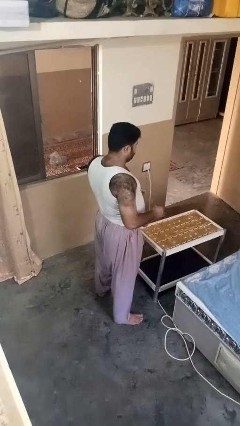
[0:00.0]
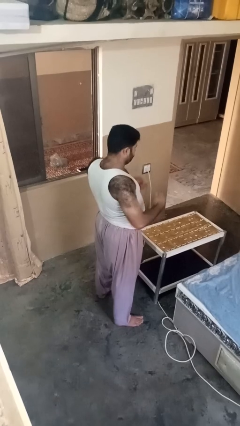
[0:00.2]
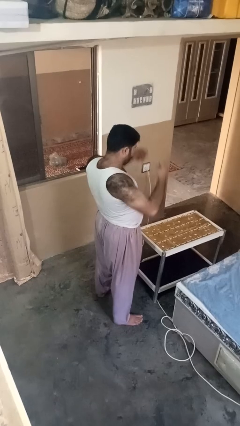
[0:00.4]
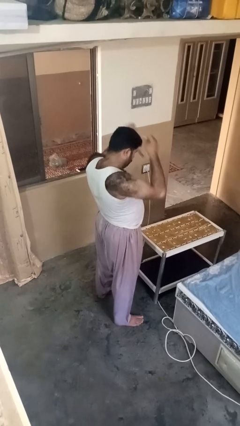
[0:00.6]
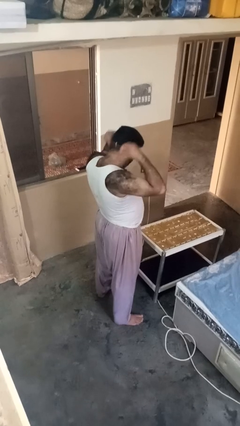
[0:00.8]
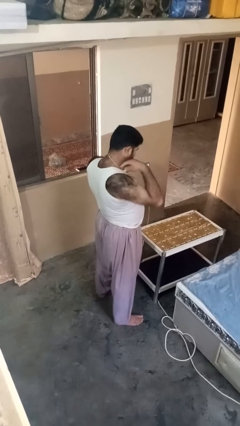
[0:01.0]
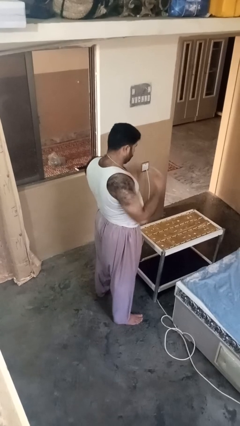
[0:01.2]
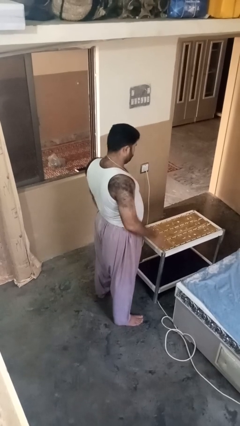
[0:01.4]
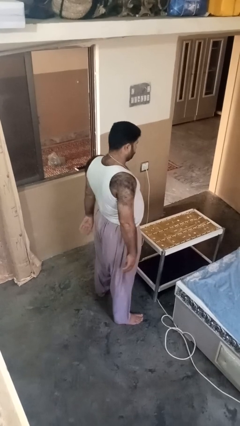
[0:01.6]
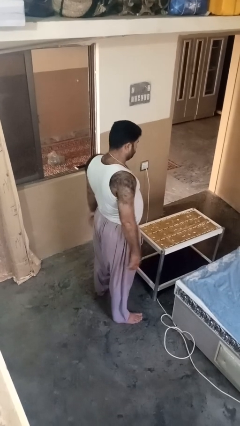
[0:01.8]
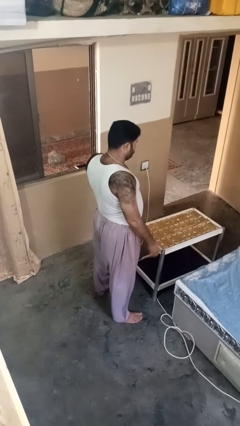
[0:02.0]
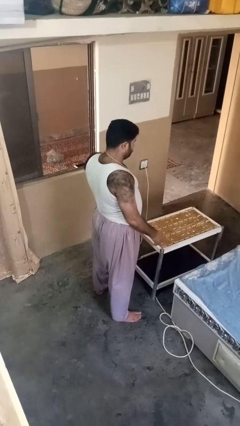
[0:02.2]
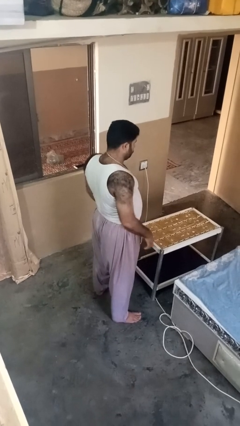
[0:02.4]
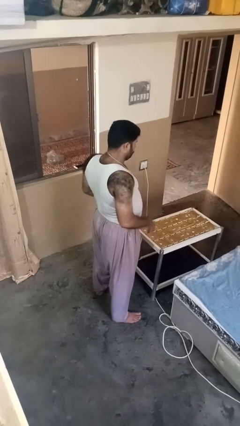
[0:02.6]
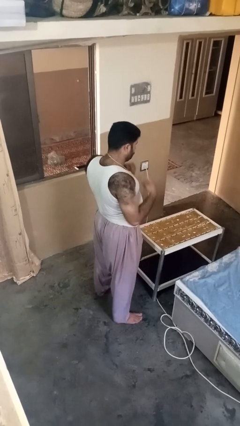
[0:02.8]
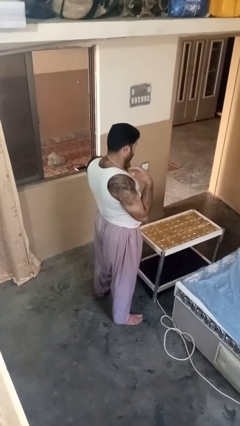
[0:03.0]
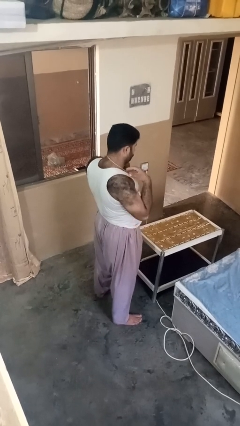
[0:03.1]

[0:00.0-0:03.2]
person puts on necklace

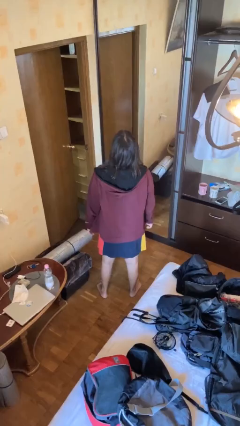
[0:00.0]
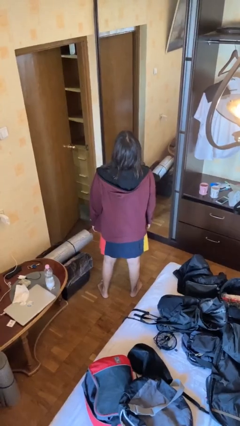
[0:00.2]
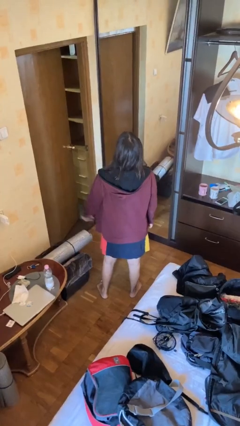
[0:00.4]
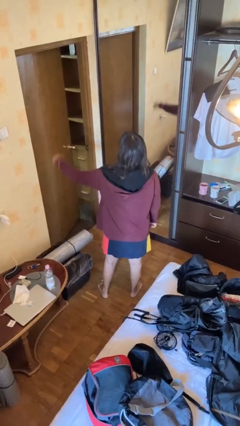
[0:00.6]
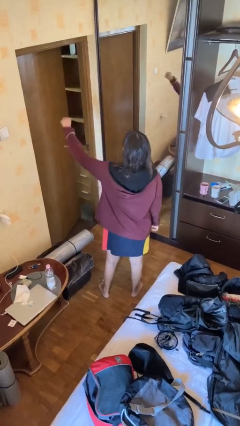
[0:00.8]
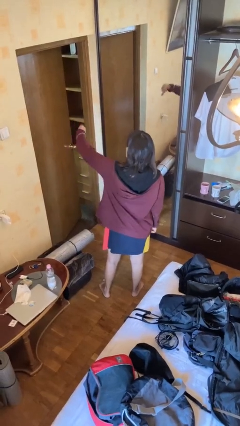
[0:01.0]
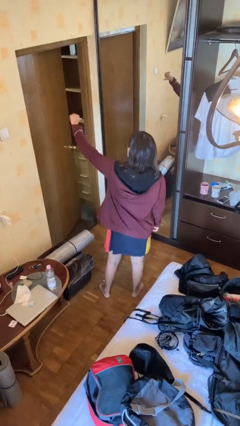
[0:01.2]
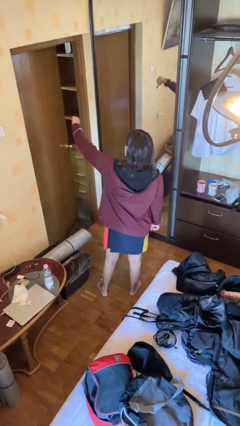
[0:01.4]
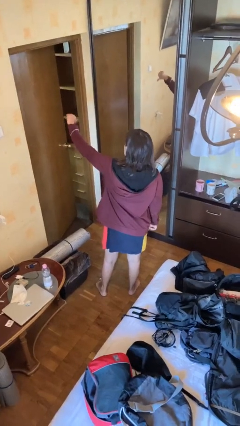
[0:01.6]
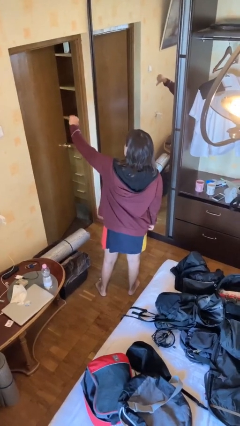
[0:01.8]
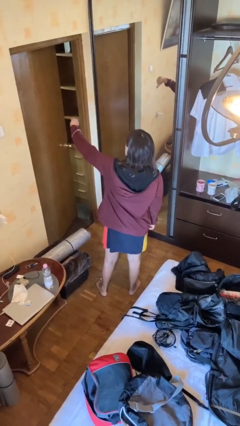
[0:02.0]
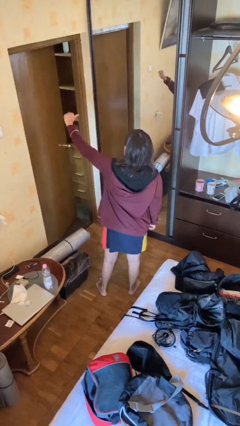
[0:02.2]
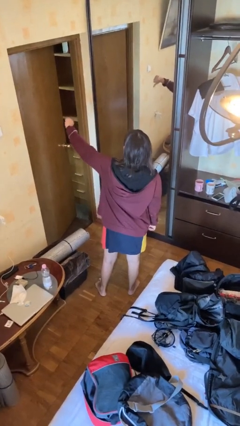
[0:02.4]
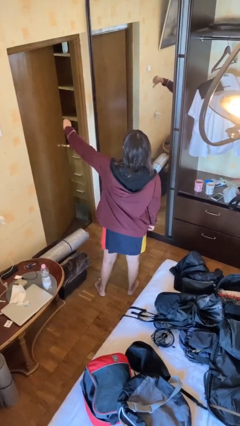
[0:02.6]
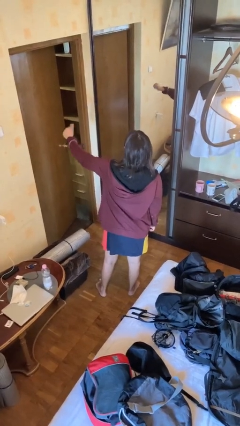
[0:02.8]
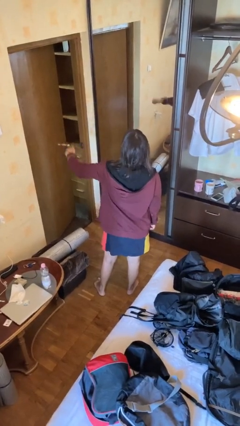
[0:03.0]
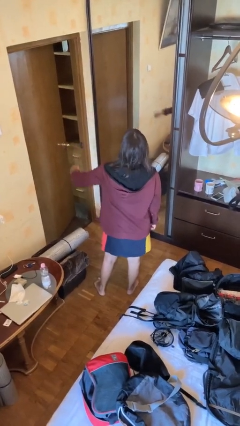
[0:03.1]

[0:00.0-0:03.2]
person gestures thumbs down

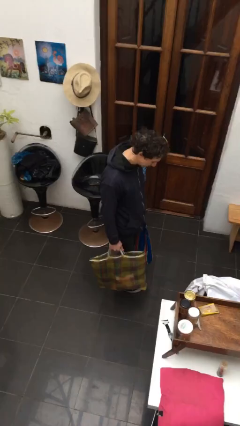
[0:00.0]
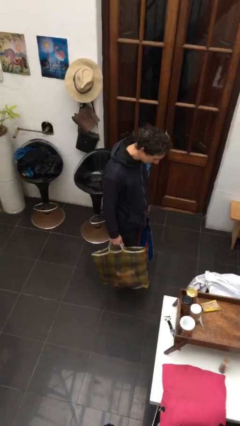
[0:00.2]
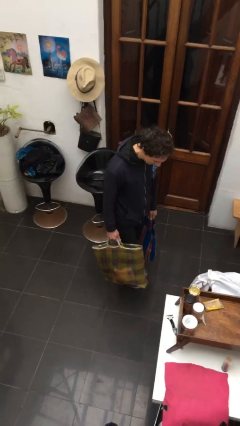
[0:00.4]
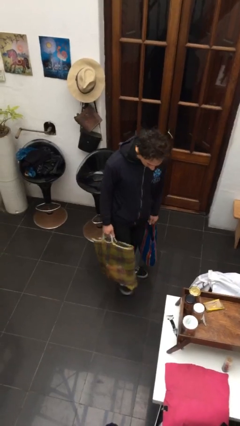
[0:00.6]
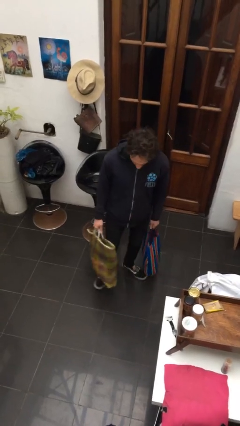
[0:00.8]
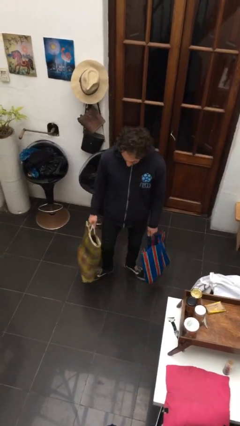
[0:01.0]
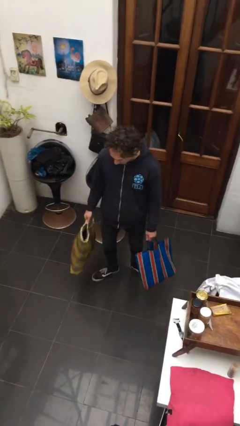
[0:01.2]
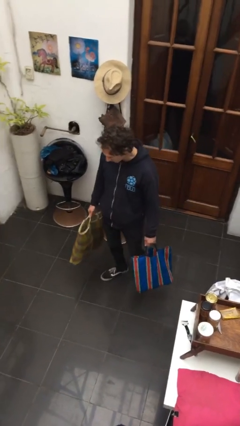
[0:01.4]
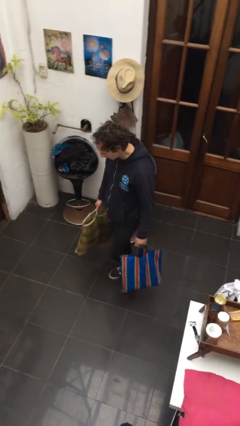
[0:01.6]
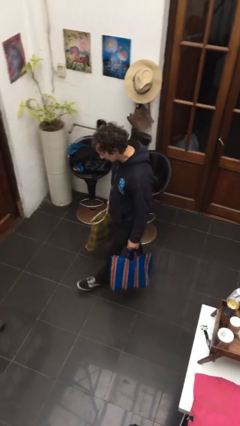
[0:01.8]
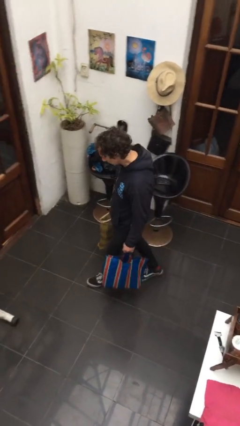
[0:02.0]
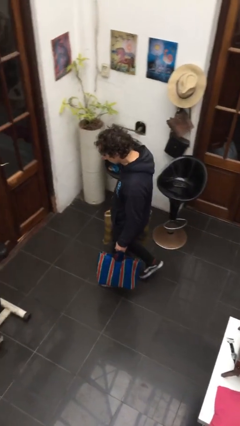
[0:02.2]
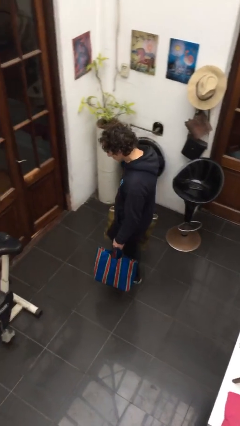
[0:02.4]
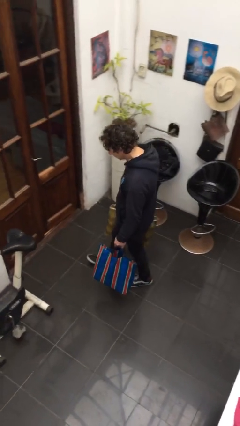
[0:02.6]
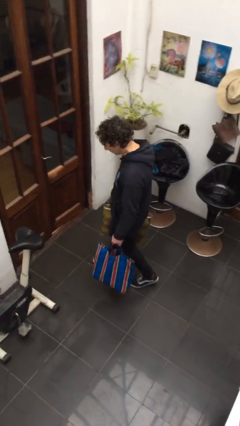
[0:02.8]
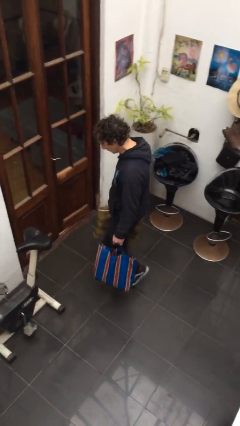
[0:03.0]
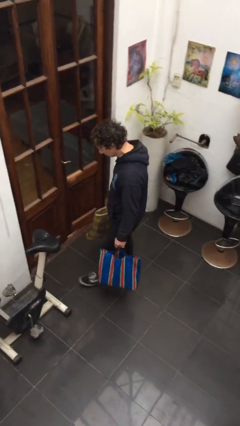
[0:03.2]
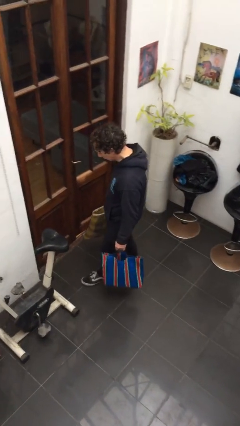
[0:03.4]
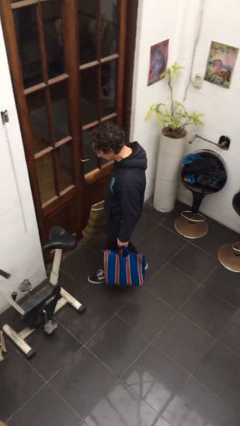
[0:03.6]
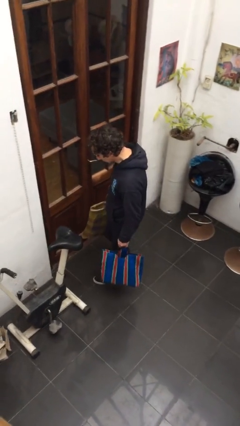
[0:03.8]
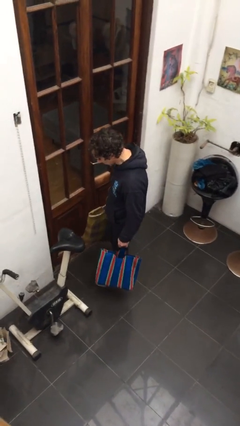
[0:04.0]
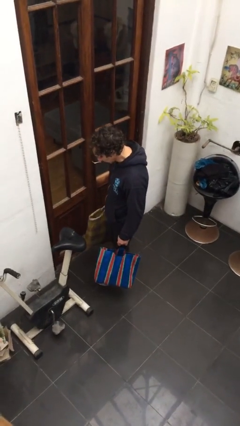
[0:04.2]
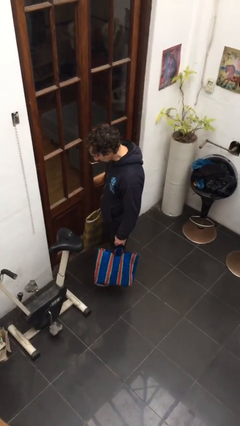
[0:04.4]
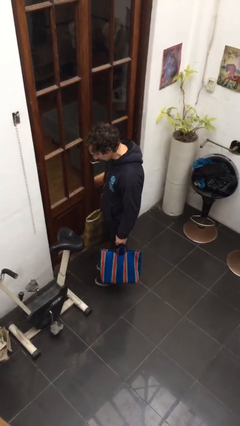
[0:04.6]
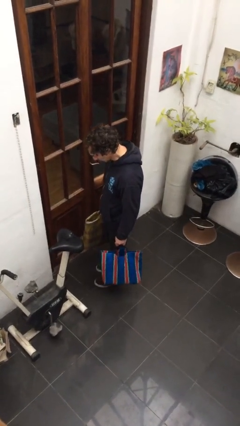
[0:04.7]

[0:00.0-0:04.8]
person carries groceries

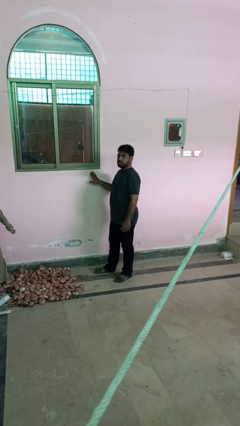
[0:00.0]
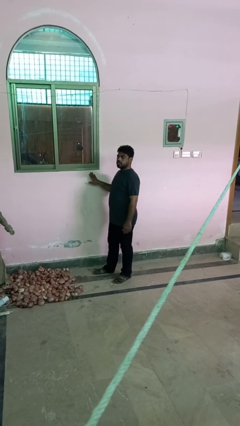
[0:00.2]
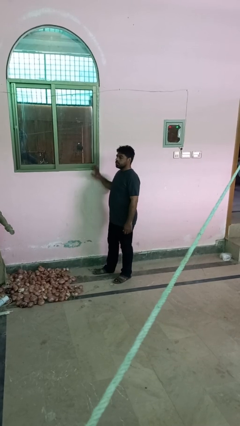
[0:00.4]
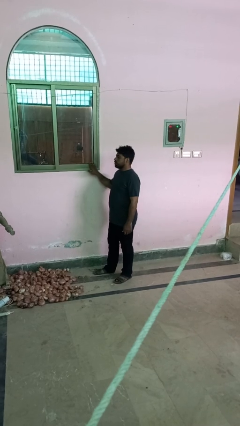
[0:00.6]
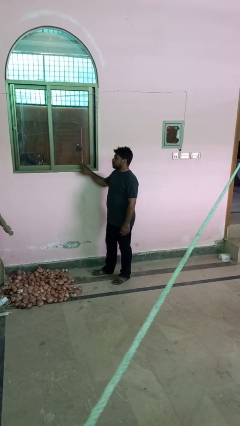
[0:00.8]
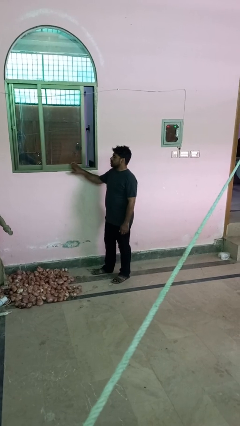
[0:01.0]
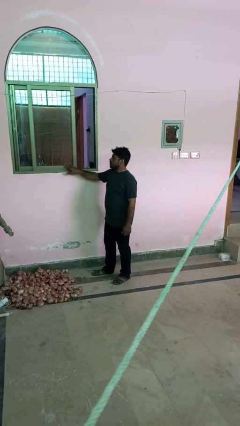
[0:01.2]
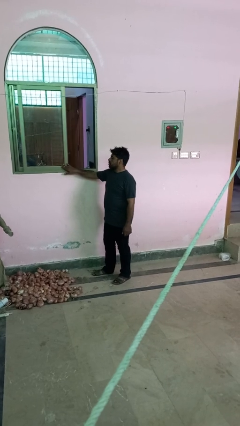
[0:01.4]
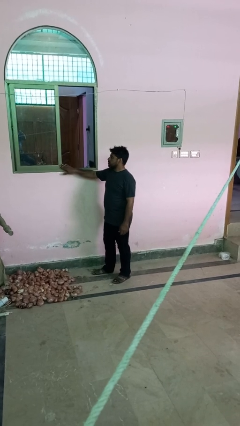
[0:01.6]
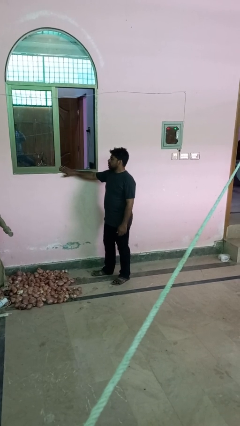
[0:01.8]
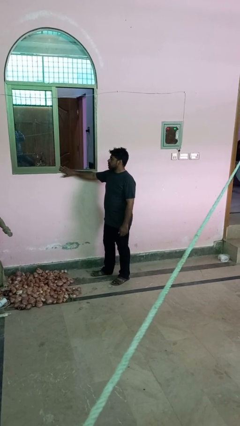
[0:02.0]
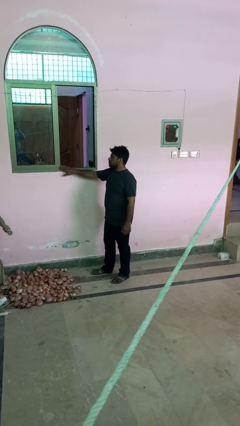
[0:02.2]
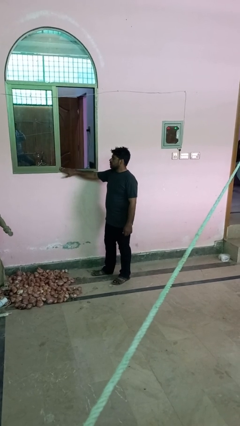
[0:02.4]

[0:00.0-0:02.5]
person opens sliding door

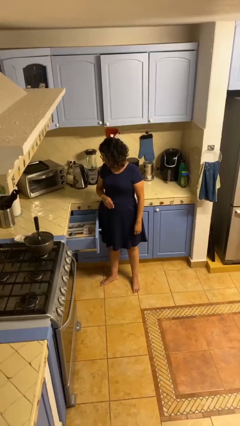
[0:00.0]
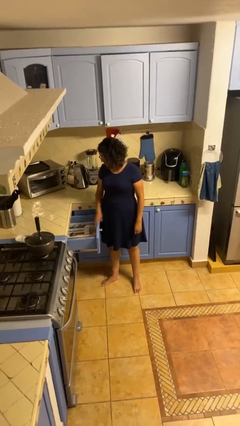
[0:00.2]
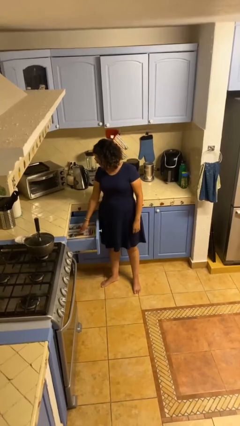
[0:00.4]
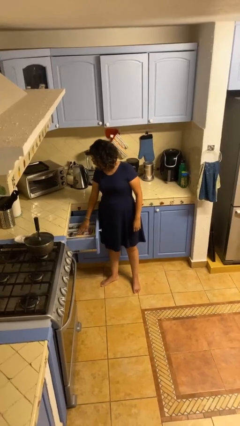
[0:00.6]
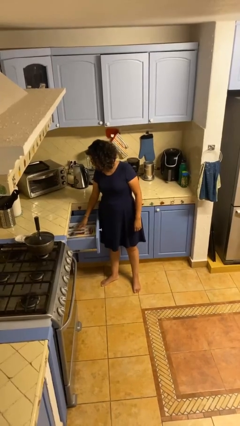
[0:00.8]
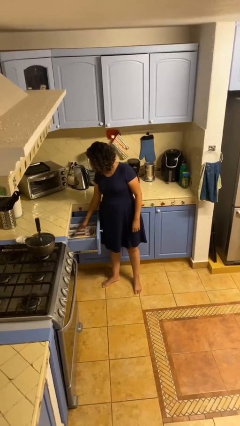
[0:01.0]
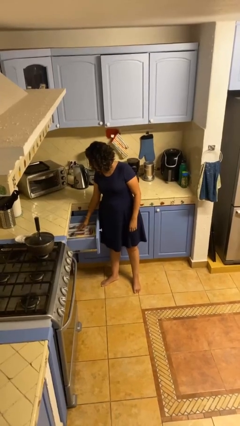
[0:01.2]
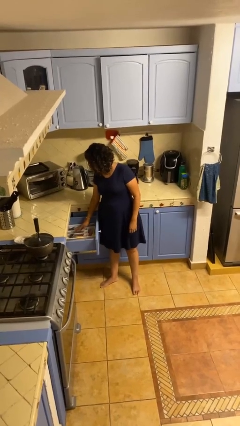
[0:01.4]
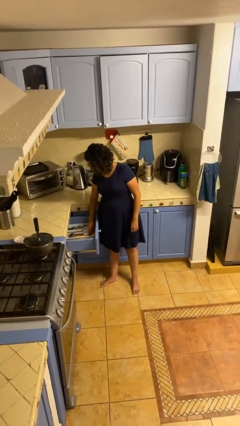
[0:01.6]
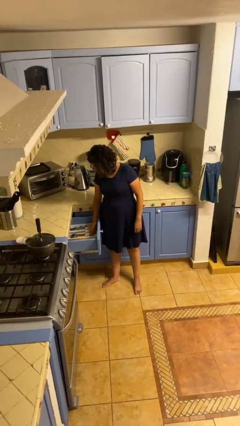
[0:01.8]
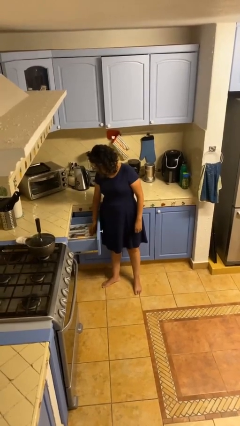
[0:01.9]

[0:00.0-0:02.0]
person searches in kitchen drawer

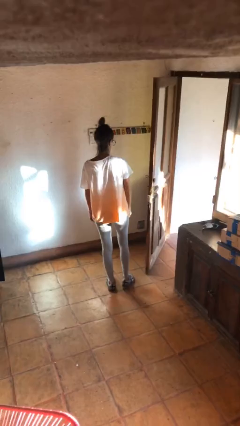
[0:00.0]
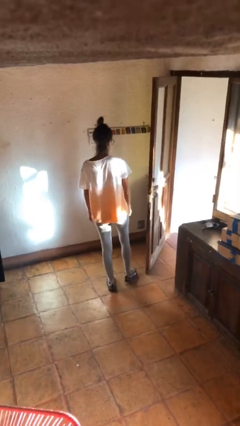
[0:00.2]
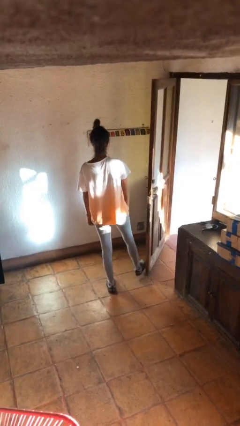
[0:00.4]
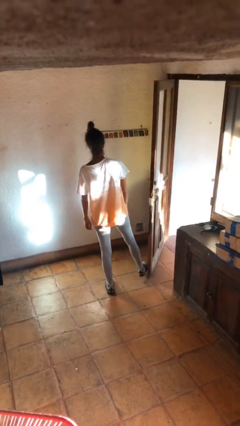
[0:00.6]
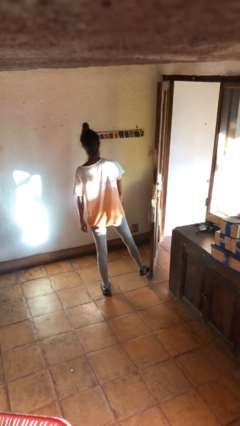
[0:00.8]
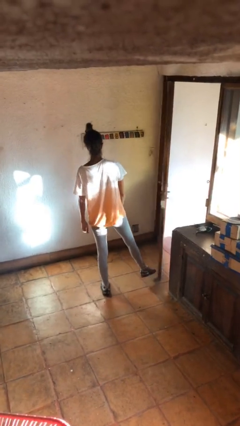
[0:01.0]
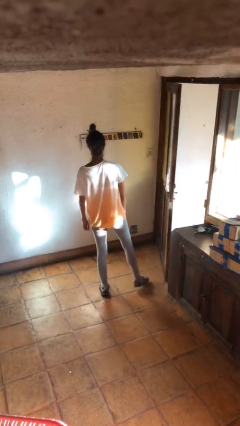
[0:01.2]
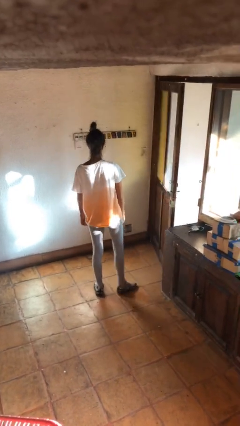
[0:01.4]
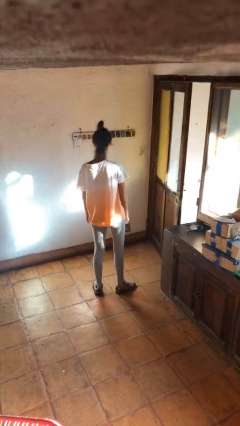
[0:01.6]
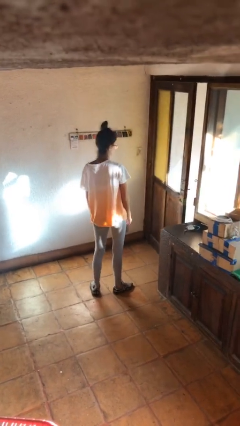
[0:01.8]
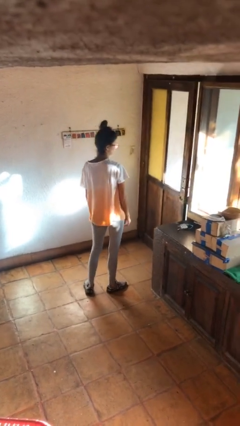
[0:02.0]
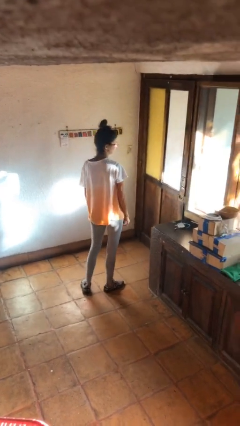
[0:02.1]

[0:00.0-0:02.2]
person closes door with foot
